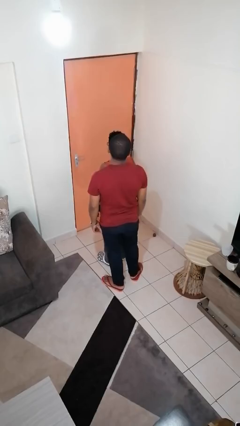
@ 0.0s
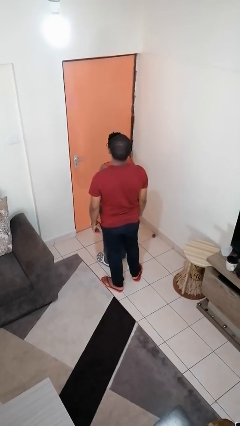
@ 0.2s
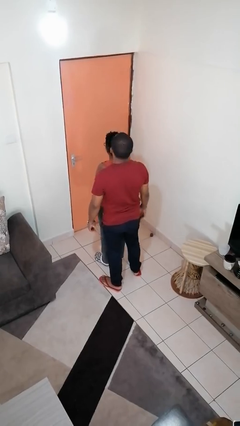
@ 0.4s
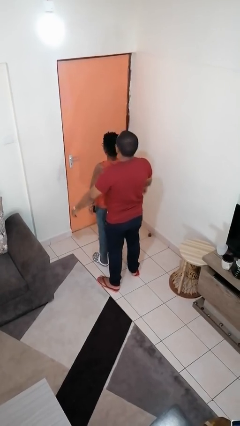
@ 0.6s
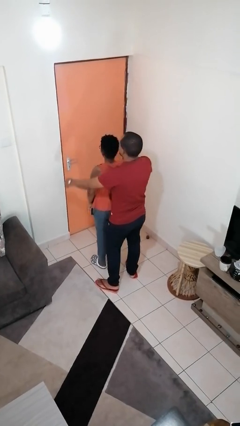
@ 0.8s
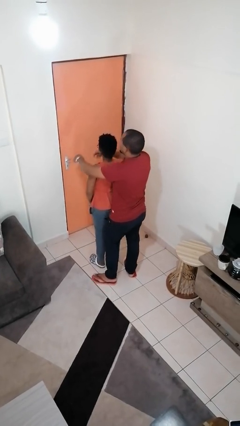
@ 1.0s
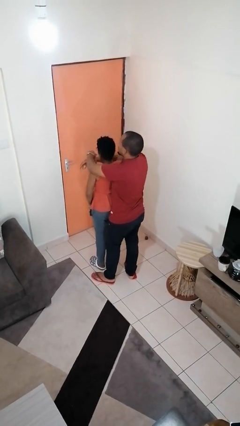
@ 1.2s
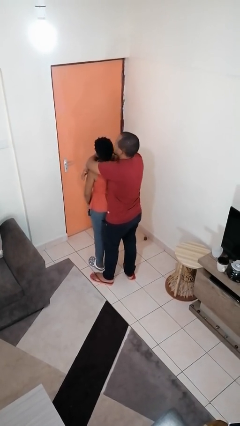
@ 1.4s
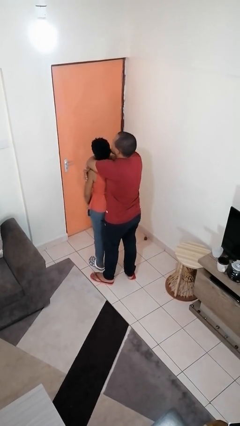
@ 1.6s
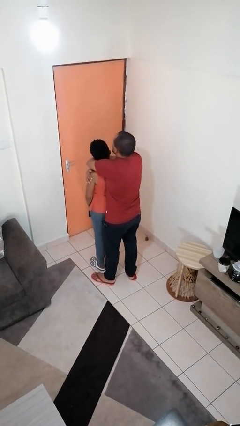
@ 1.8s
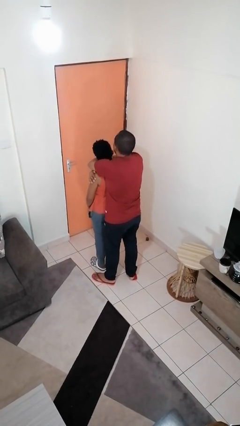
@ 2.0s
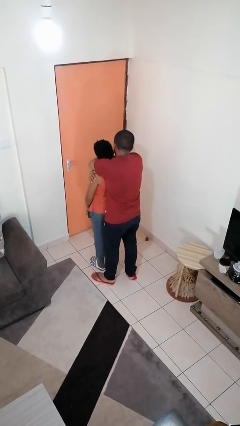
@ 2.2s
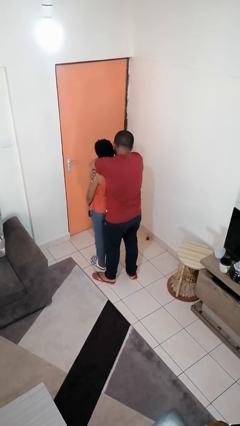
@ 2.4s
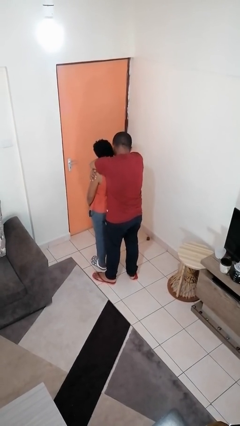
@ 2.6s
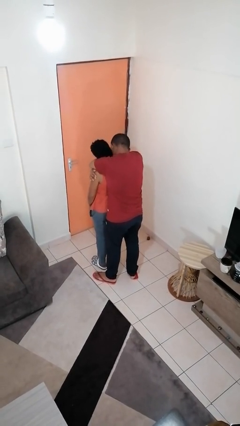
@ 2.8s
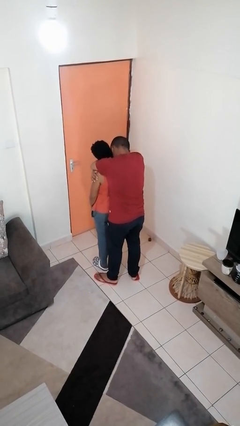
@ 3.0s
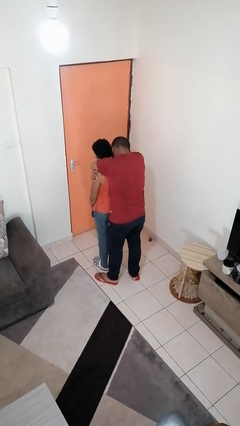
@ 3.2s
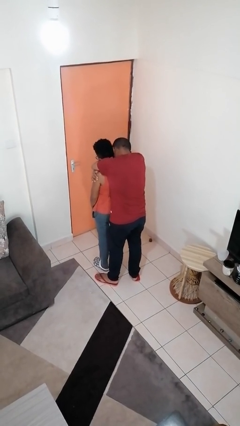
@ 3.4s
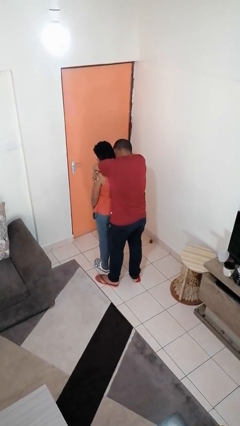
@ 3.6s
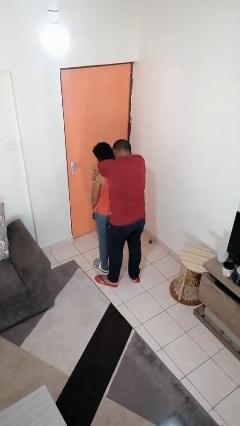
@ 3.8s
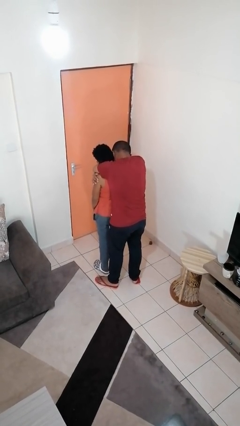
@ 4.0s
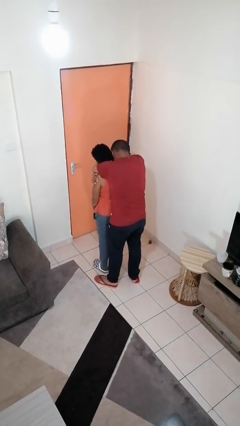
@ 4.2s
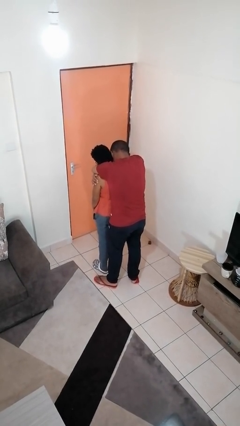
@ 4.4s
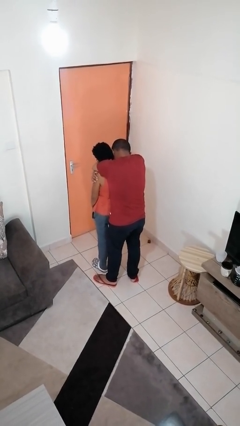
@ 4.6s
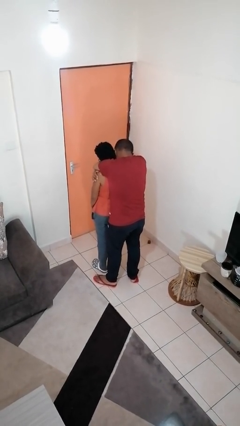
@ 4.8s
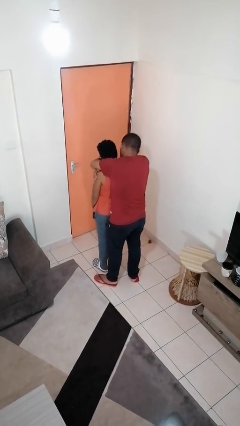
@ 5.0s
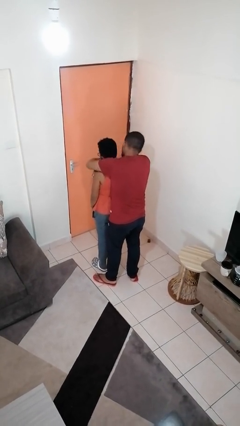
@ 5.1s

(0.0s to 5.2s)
person hugs person from behind

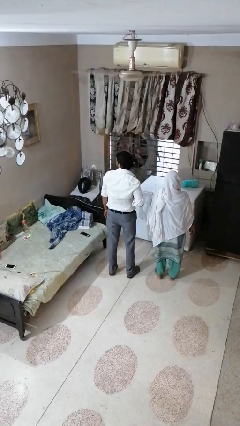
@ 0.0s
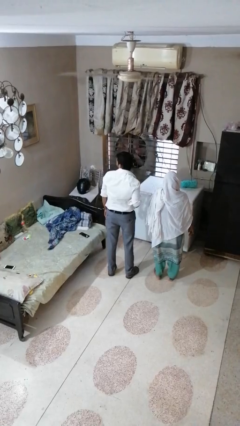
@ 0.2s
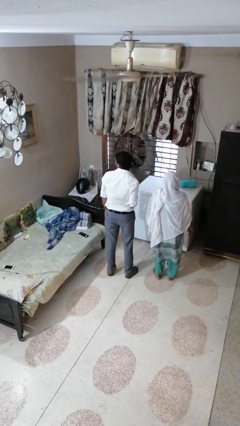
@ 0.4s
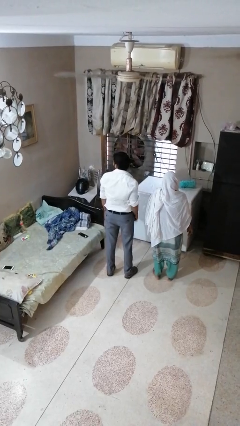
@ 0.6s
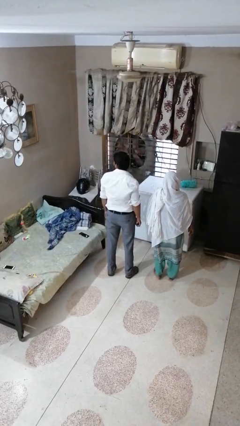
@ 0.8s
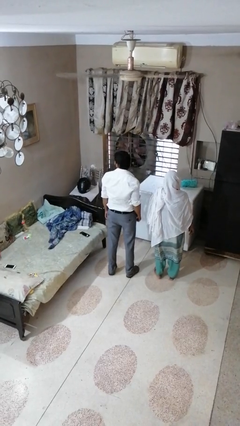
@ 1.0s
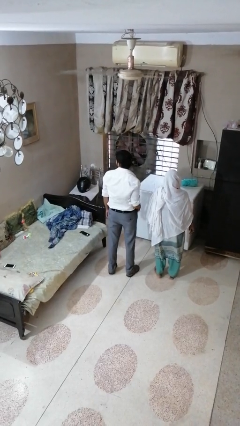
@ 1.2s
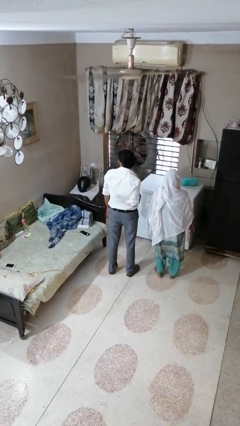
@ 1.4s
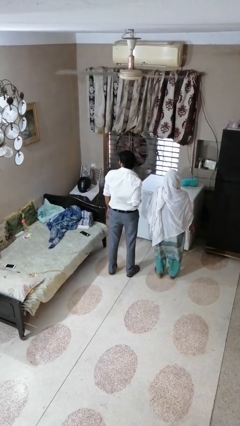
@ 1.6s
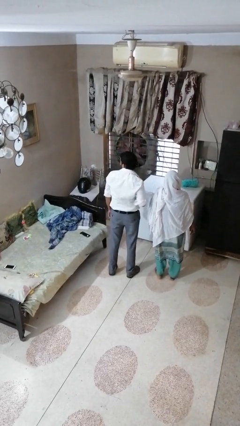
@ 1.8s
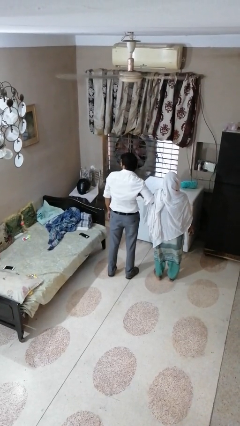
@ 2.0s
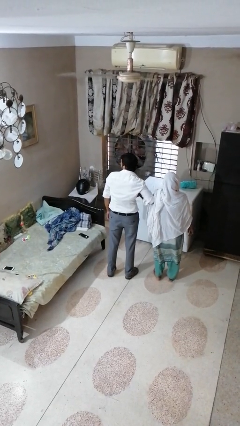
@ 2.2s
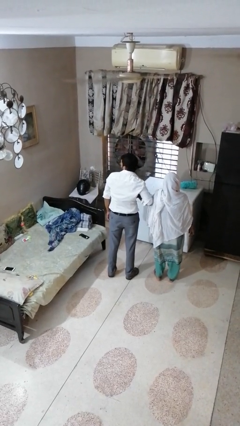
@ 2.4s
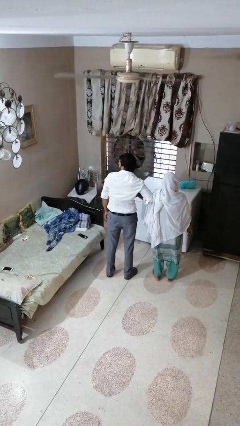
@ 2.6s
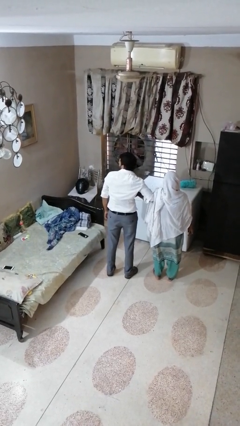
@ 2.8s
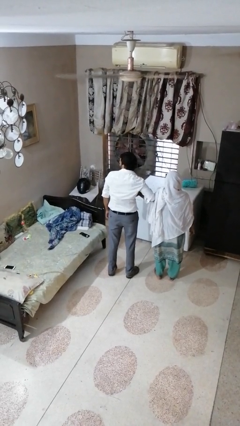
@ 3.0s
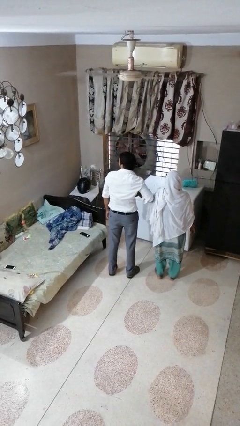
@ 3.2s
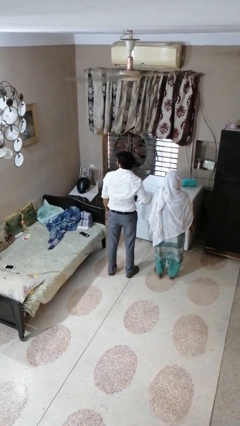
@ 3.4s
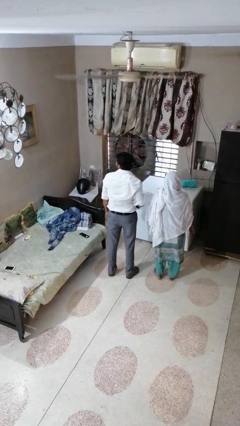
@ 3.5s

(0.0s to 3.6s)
person nudges person with elbow

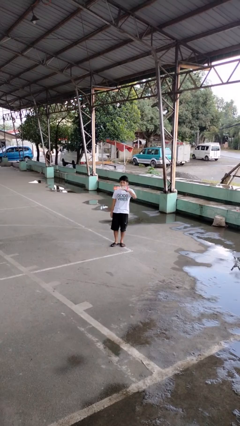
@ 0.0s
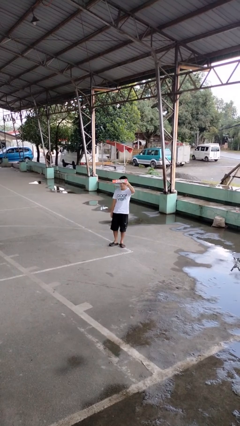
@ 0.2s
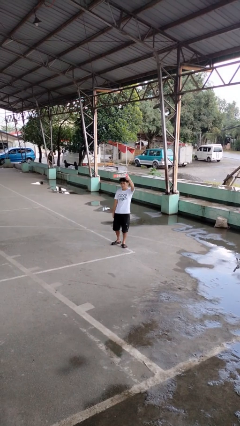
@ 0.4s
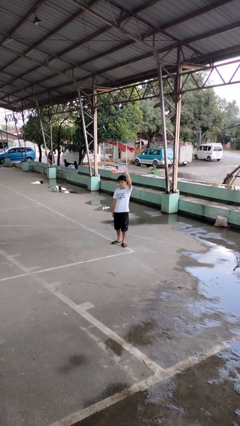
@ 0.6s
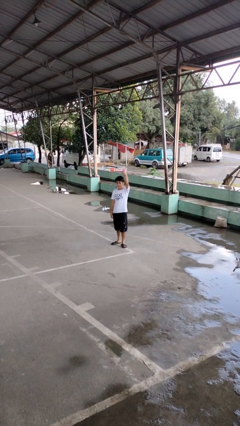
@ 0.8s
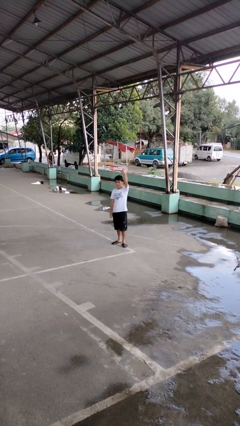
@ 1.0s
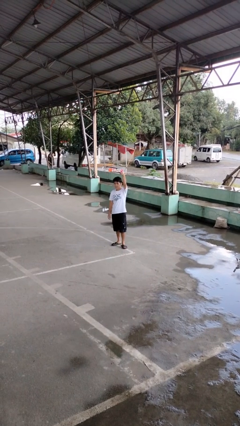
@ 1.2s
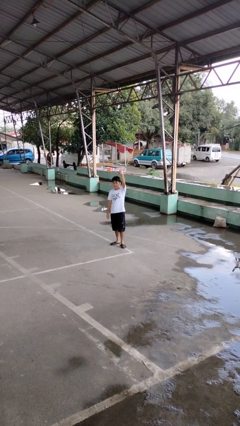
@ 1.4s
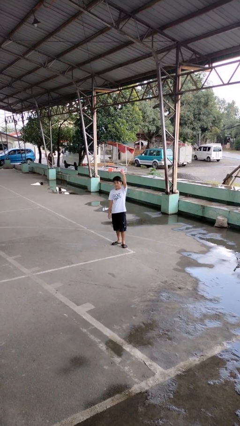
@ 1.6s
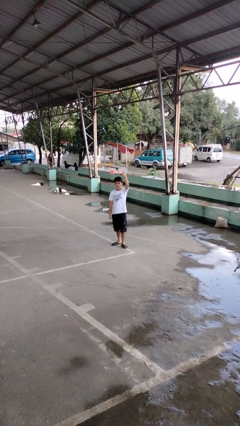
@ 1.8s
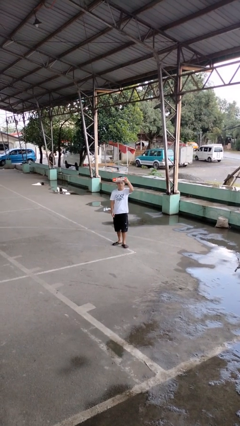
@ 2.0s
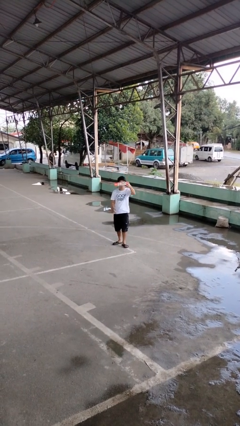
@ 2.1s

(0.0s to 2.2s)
person holds object above head

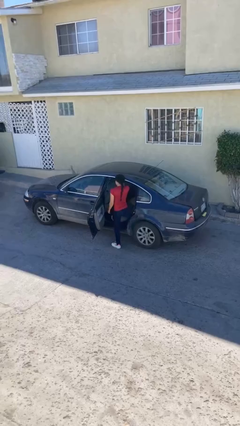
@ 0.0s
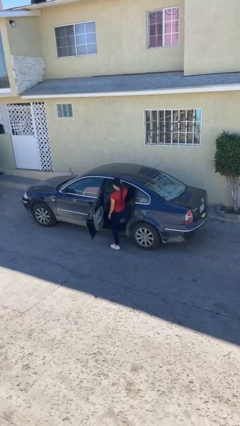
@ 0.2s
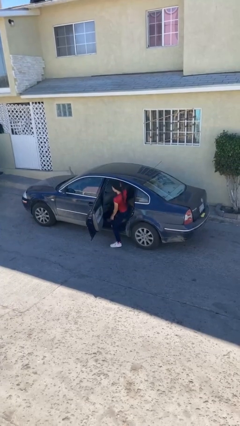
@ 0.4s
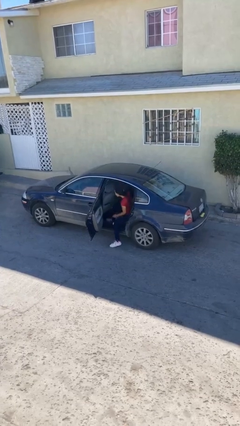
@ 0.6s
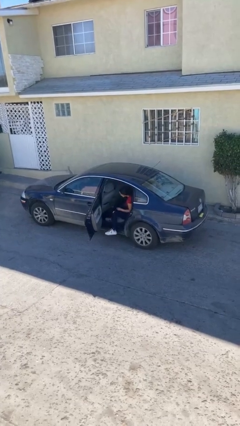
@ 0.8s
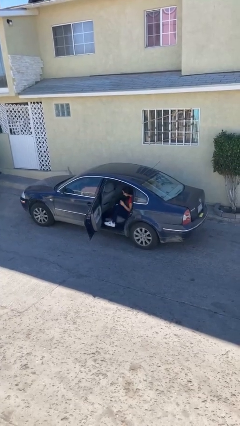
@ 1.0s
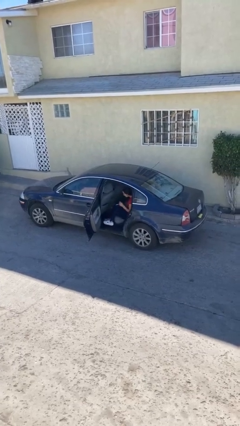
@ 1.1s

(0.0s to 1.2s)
person enters car

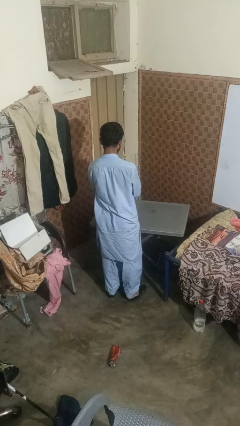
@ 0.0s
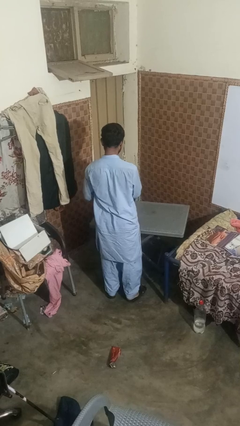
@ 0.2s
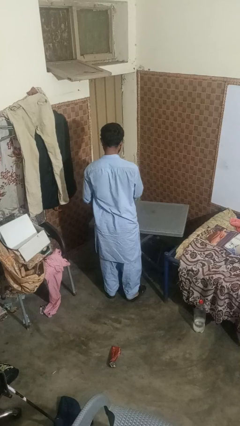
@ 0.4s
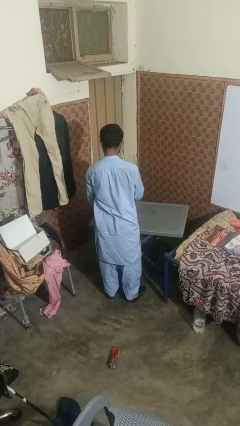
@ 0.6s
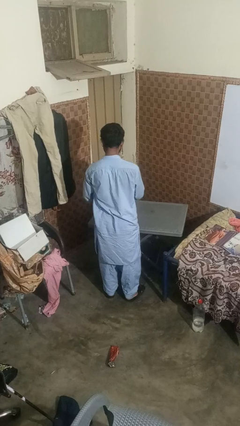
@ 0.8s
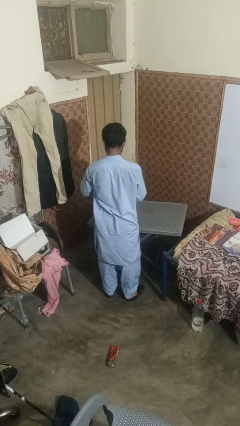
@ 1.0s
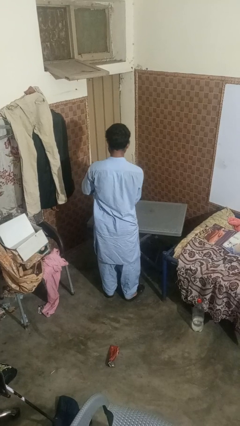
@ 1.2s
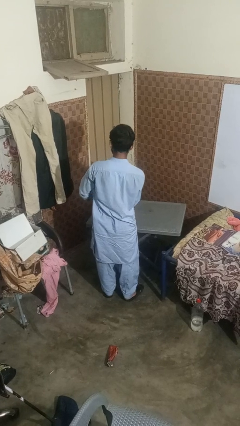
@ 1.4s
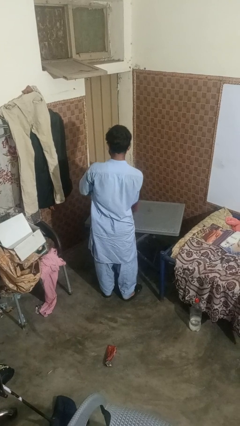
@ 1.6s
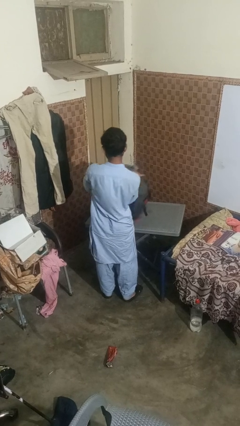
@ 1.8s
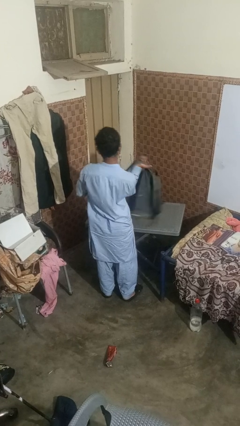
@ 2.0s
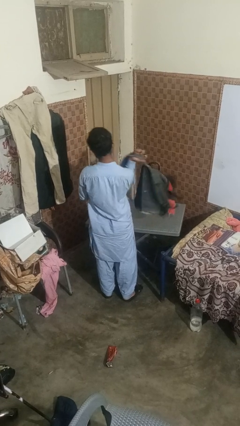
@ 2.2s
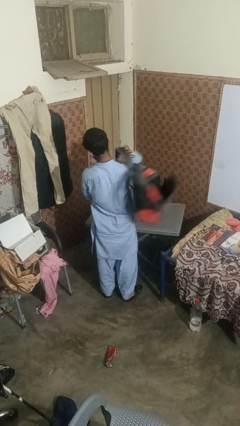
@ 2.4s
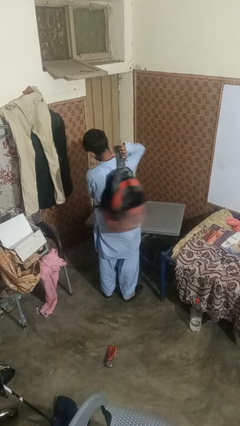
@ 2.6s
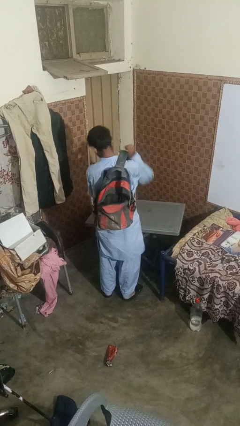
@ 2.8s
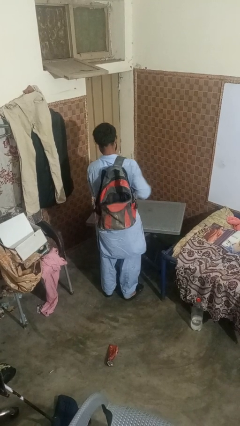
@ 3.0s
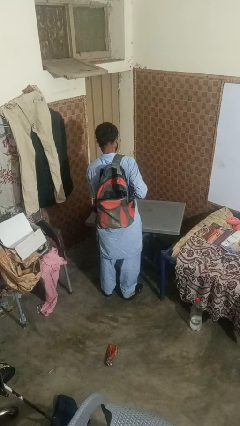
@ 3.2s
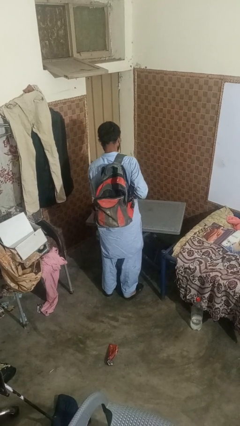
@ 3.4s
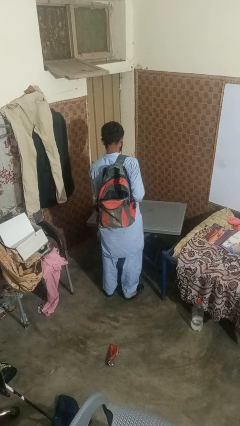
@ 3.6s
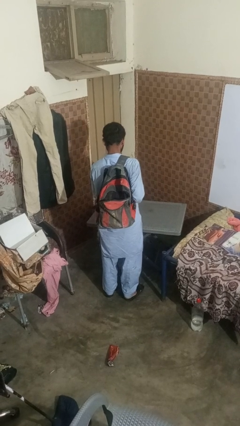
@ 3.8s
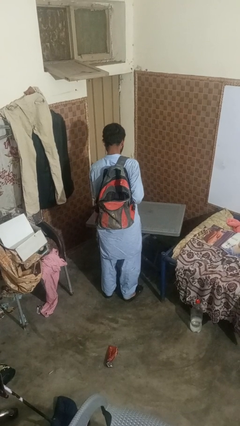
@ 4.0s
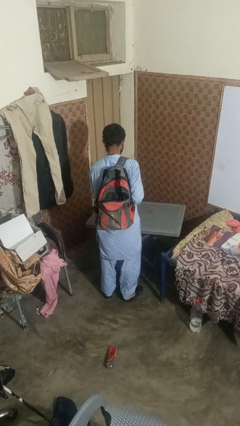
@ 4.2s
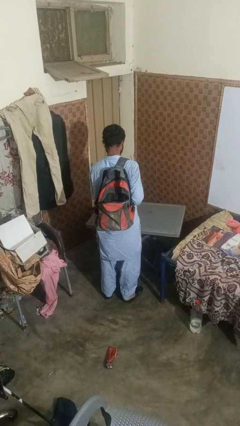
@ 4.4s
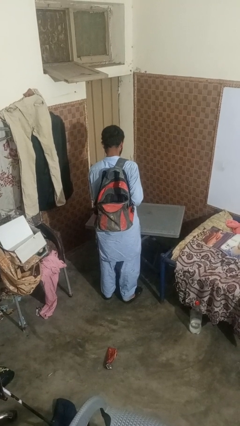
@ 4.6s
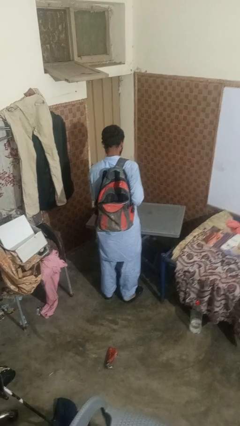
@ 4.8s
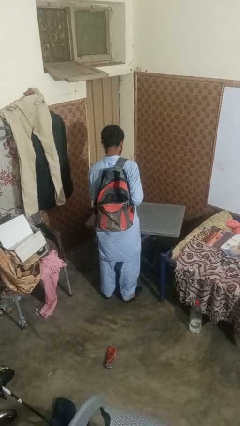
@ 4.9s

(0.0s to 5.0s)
person puts on backpack

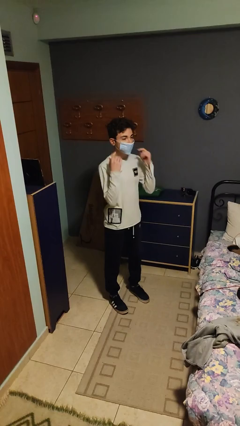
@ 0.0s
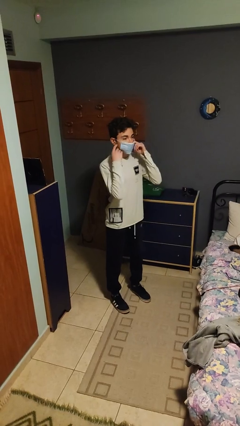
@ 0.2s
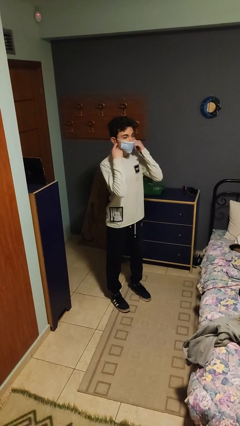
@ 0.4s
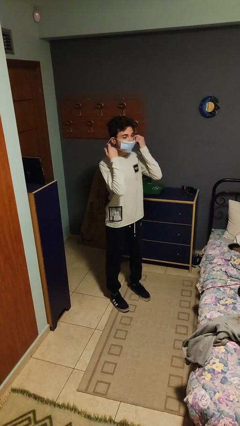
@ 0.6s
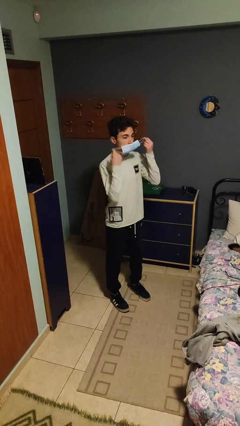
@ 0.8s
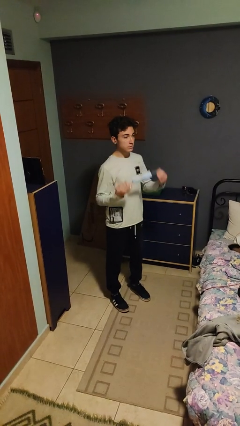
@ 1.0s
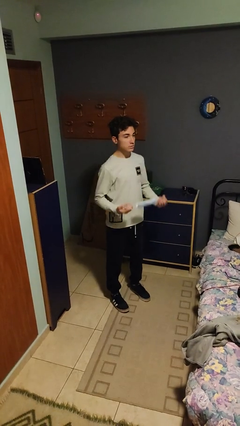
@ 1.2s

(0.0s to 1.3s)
person takes off facemask
